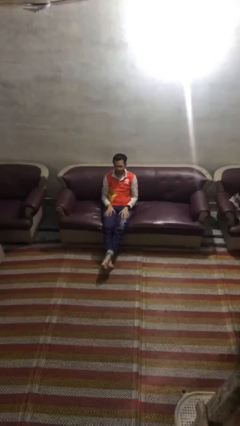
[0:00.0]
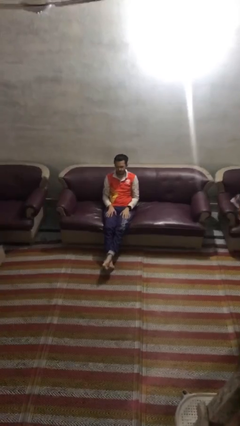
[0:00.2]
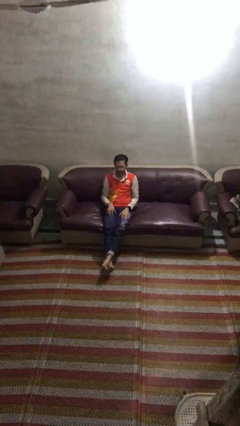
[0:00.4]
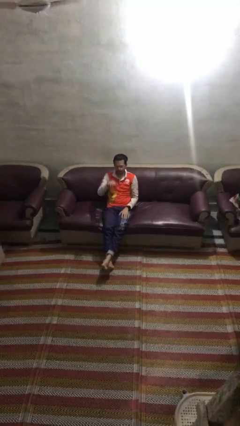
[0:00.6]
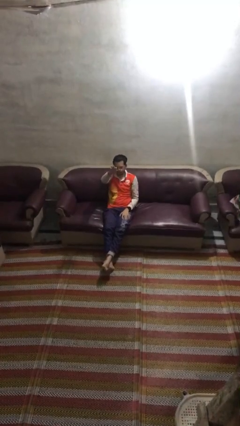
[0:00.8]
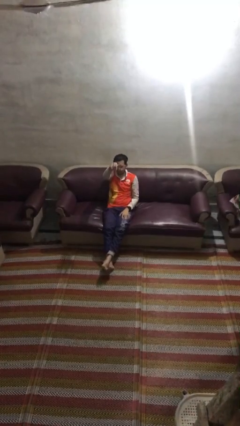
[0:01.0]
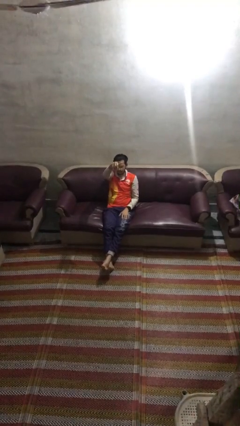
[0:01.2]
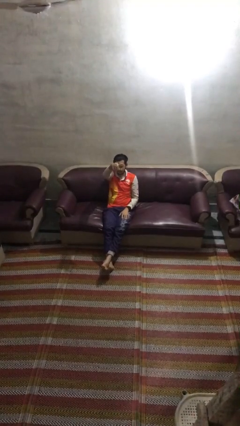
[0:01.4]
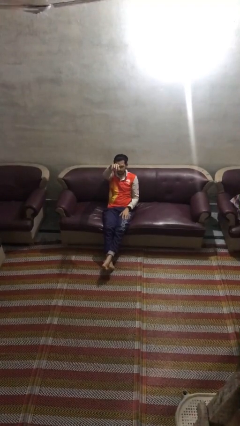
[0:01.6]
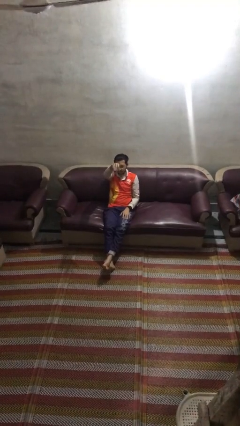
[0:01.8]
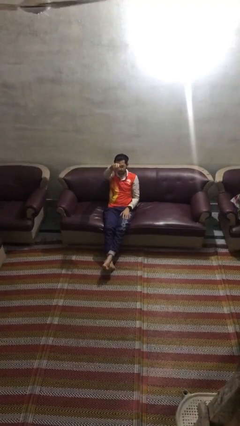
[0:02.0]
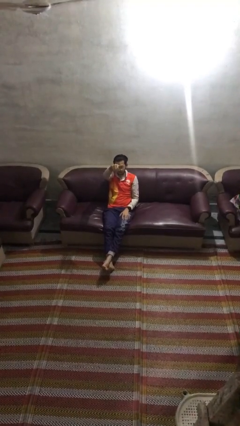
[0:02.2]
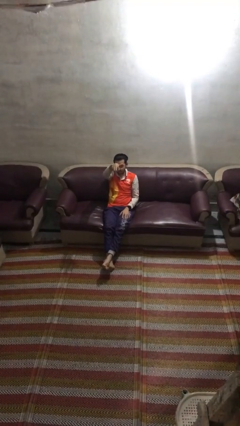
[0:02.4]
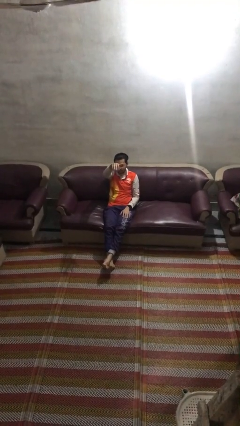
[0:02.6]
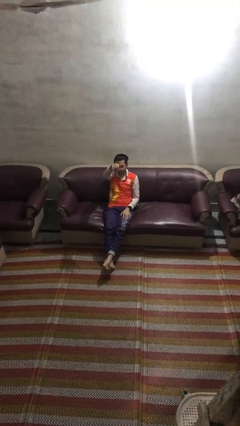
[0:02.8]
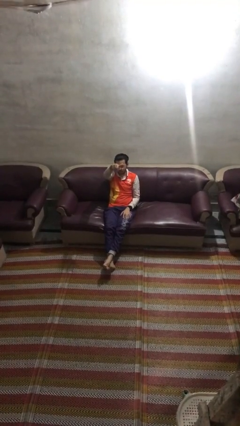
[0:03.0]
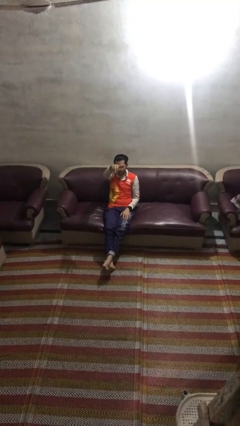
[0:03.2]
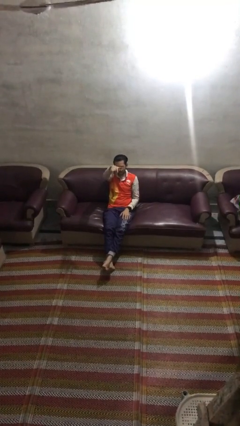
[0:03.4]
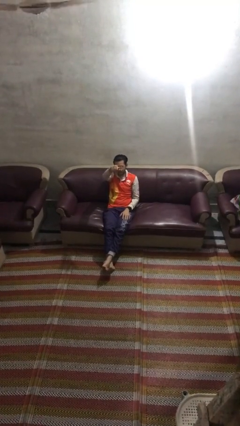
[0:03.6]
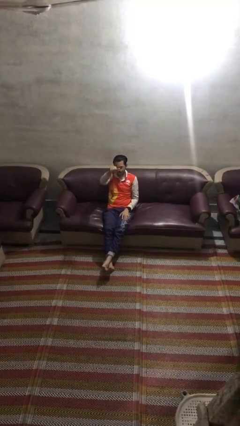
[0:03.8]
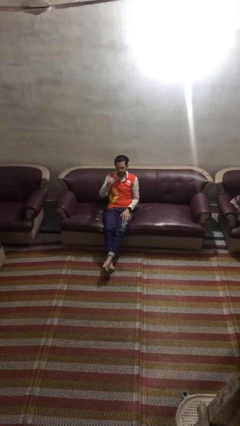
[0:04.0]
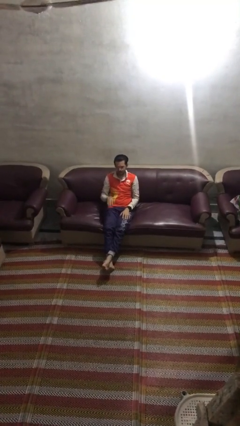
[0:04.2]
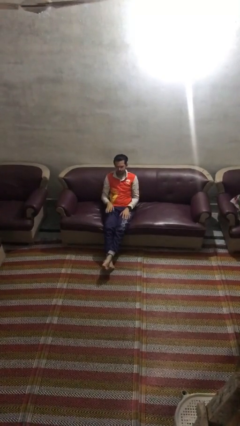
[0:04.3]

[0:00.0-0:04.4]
person gestures come here

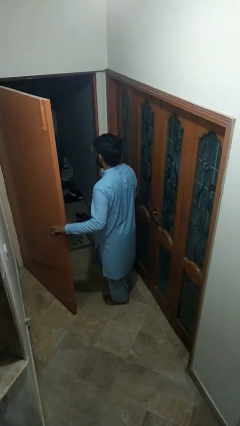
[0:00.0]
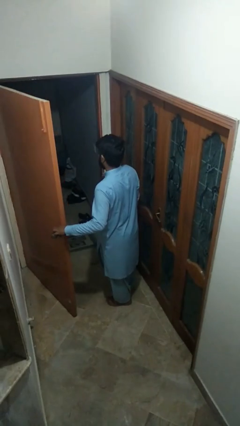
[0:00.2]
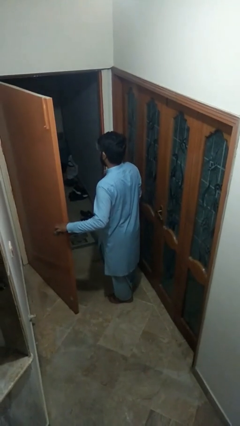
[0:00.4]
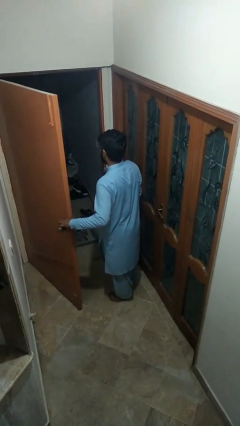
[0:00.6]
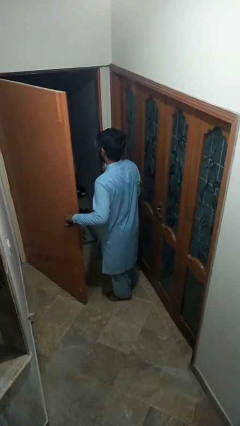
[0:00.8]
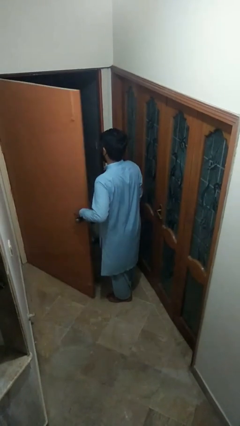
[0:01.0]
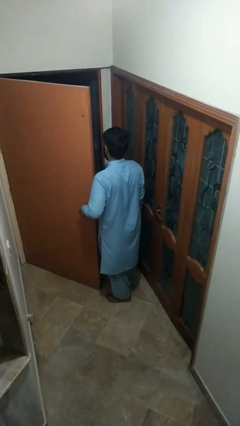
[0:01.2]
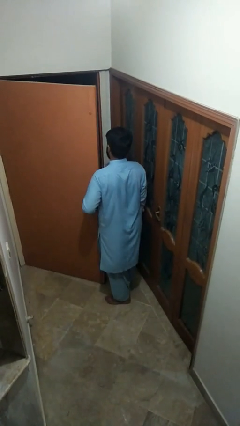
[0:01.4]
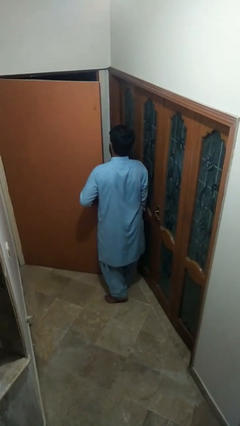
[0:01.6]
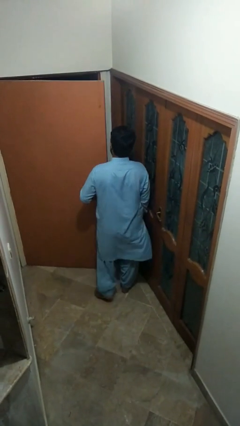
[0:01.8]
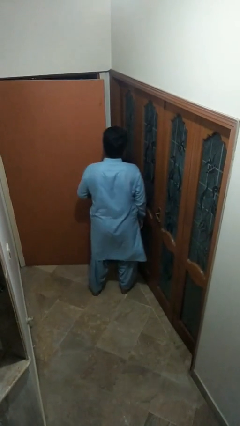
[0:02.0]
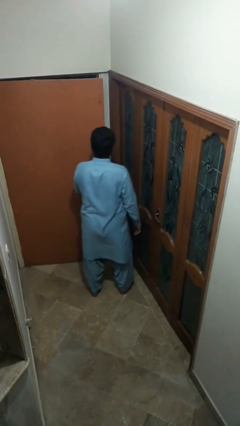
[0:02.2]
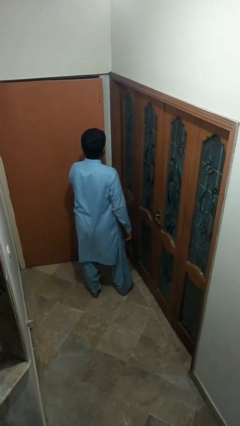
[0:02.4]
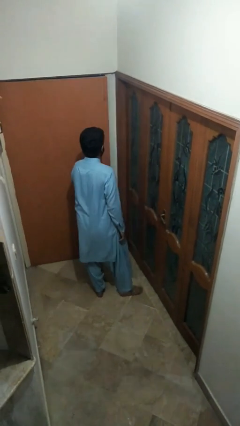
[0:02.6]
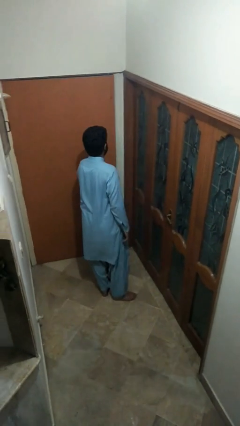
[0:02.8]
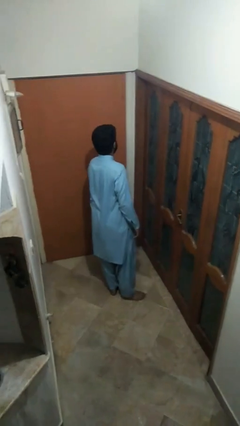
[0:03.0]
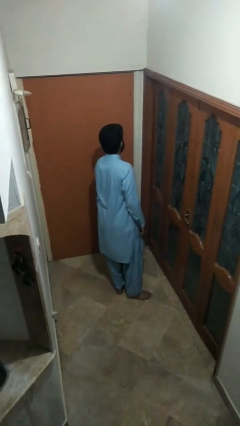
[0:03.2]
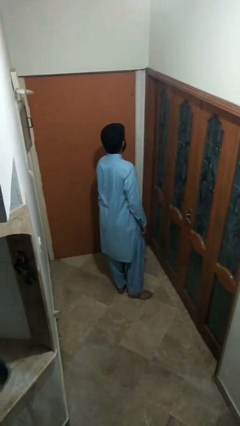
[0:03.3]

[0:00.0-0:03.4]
person closes facility door

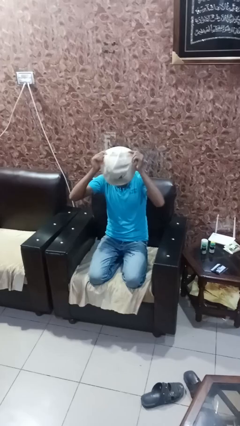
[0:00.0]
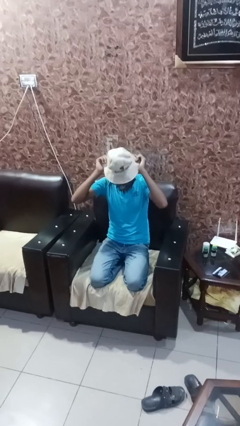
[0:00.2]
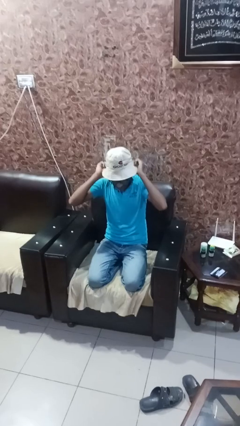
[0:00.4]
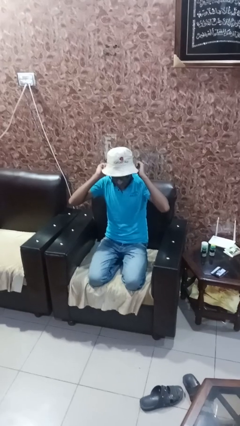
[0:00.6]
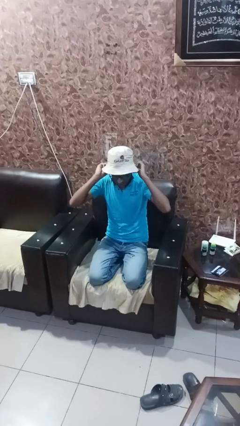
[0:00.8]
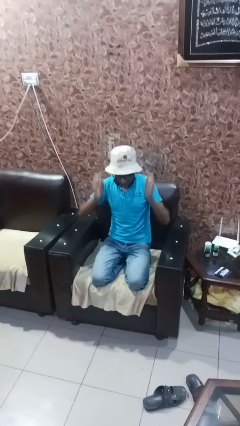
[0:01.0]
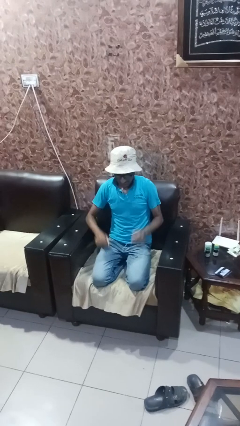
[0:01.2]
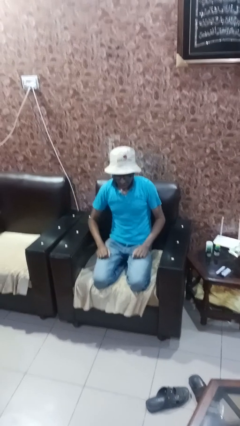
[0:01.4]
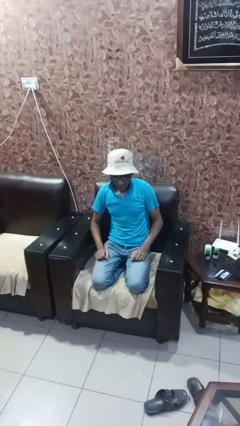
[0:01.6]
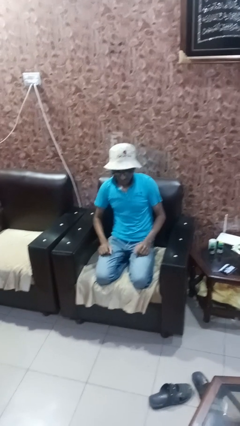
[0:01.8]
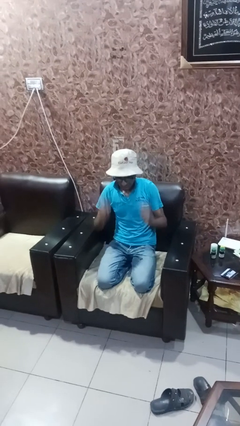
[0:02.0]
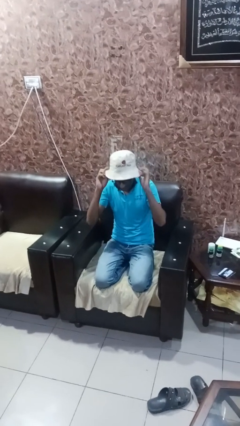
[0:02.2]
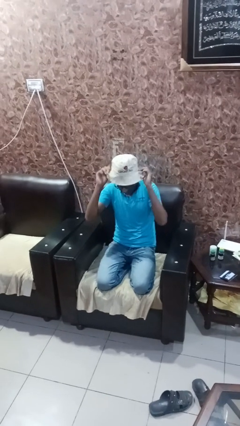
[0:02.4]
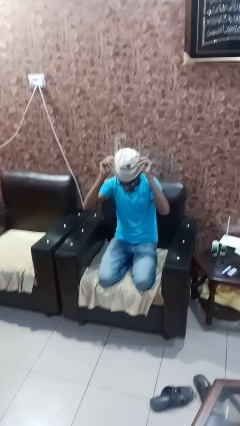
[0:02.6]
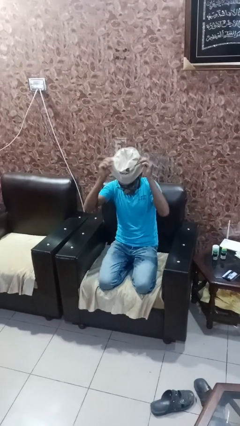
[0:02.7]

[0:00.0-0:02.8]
person puts on hat

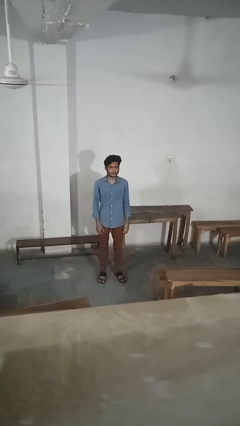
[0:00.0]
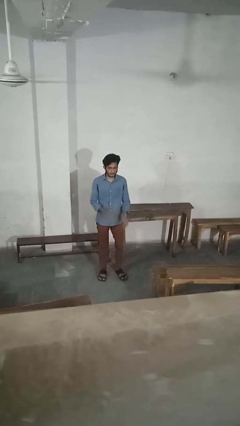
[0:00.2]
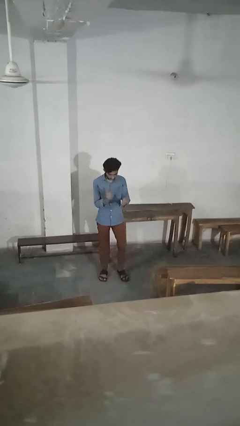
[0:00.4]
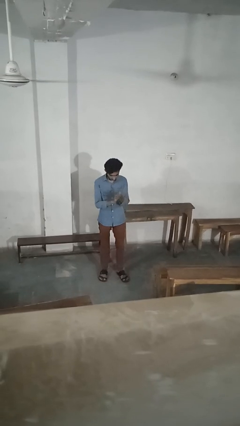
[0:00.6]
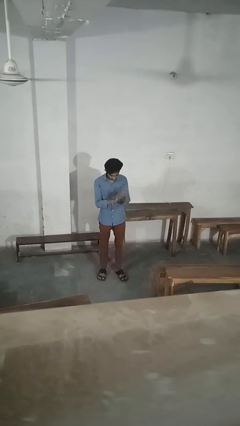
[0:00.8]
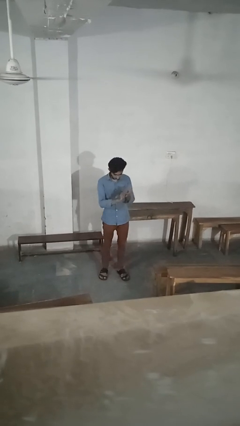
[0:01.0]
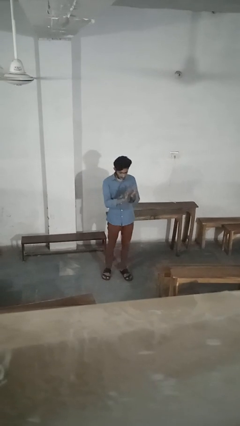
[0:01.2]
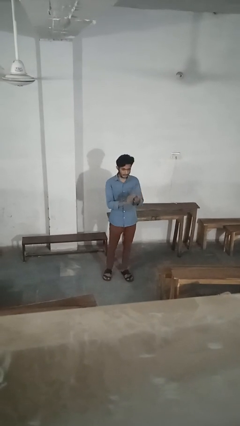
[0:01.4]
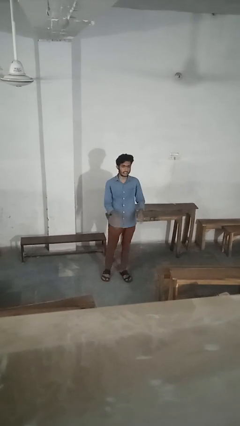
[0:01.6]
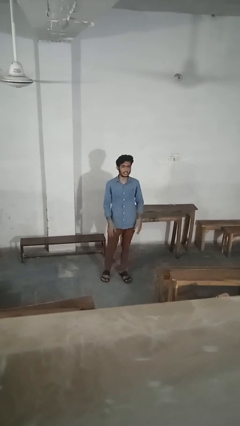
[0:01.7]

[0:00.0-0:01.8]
person claps hands

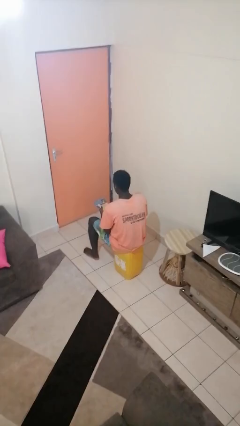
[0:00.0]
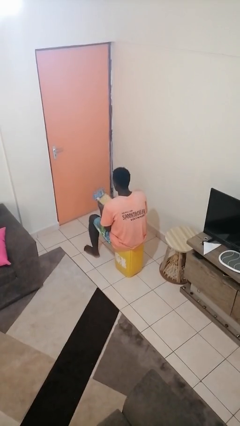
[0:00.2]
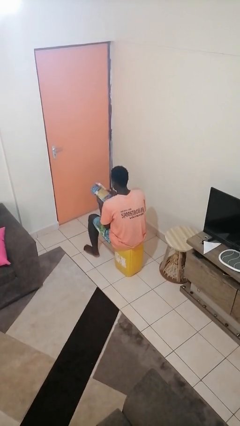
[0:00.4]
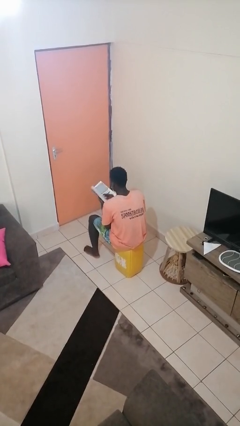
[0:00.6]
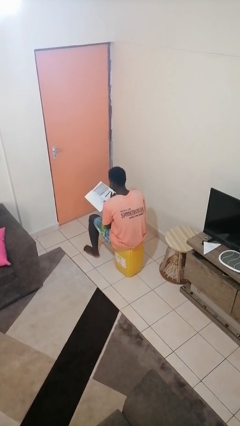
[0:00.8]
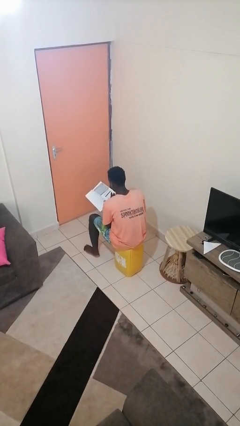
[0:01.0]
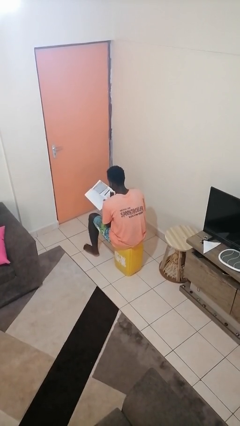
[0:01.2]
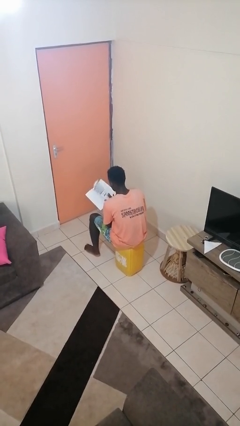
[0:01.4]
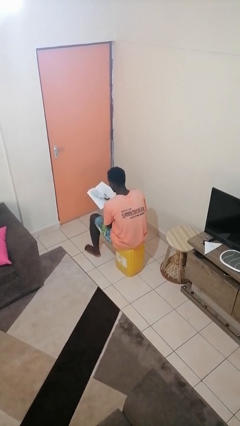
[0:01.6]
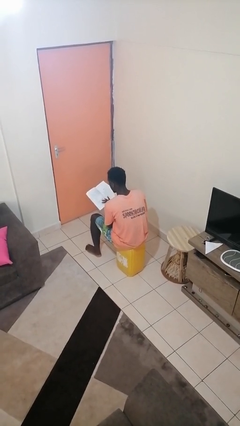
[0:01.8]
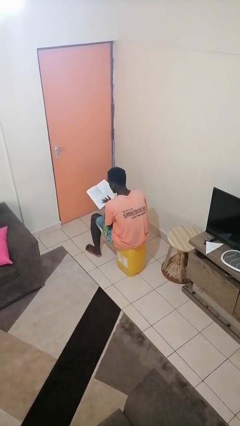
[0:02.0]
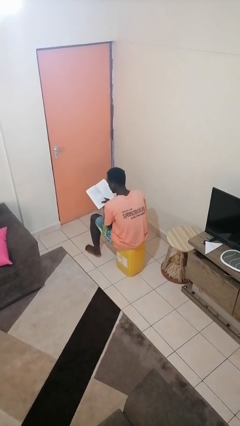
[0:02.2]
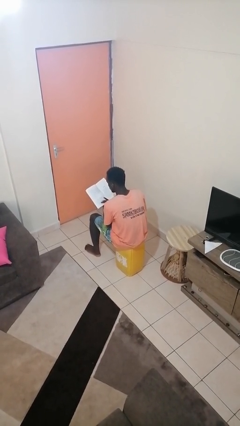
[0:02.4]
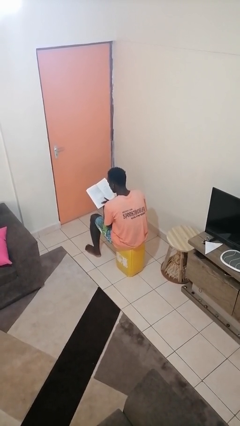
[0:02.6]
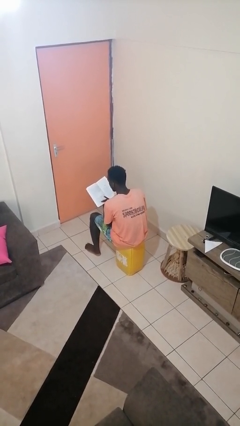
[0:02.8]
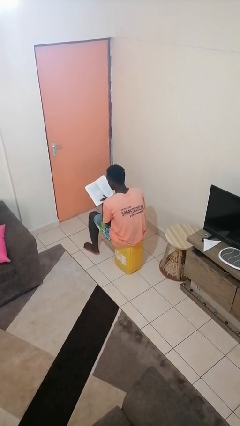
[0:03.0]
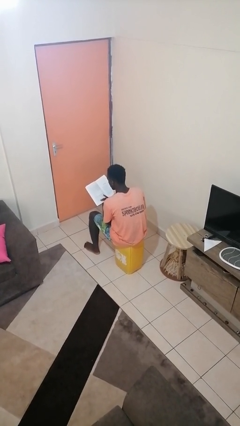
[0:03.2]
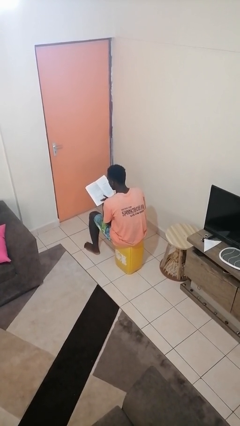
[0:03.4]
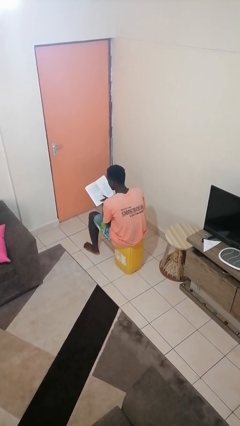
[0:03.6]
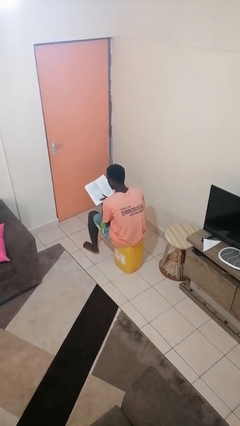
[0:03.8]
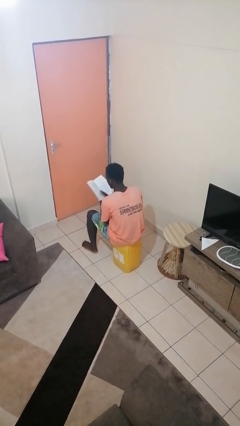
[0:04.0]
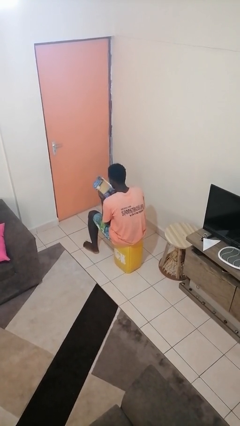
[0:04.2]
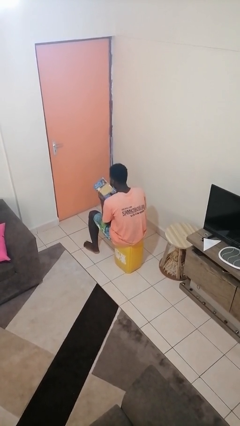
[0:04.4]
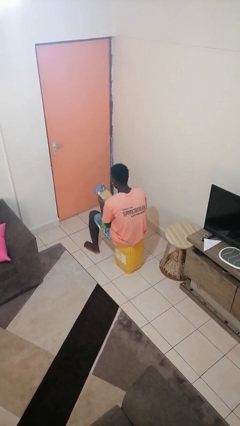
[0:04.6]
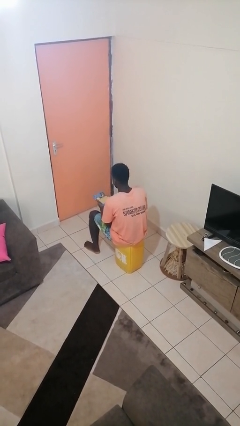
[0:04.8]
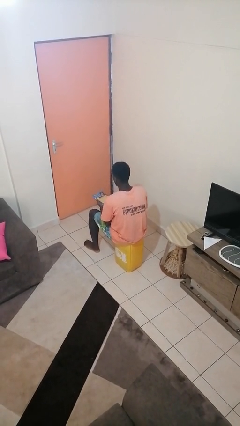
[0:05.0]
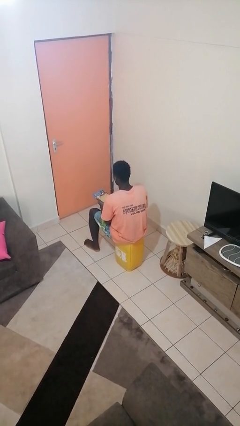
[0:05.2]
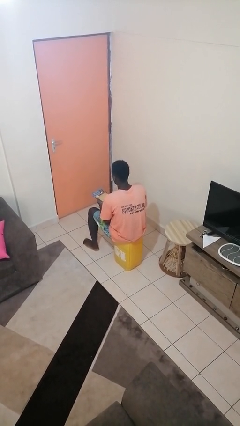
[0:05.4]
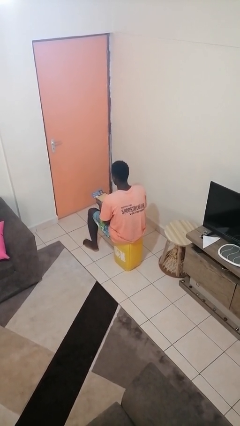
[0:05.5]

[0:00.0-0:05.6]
person reads book
